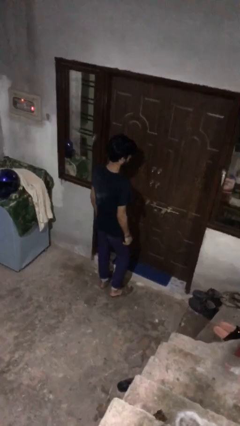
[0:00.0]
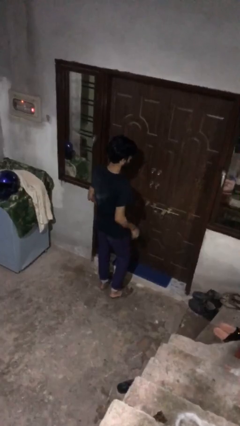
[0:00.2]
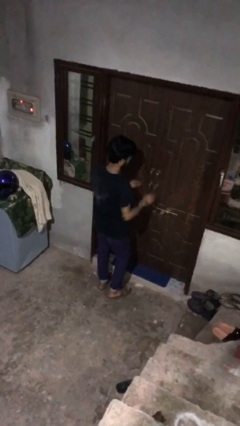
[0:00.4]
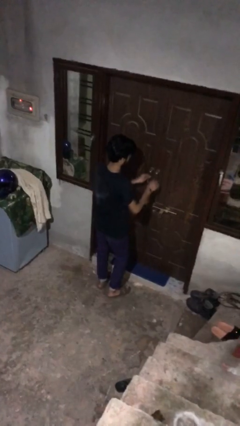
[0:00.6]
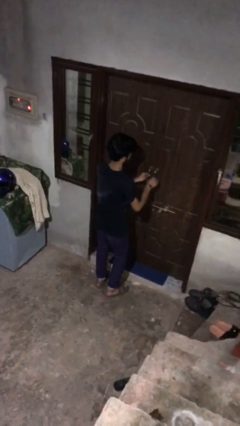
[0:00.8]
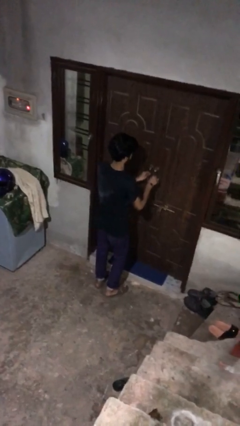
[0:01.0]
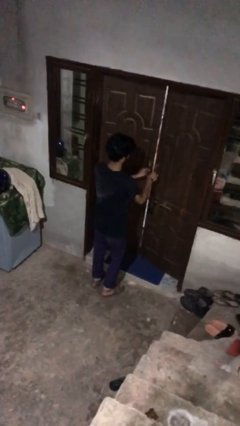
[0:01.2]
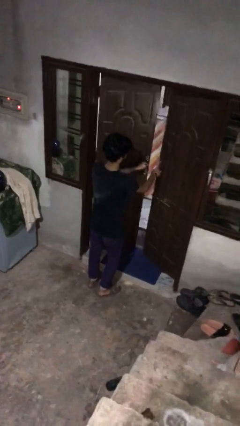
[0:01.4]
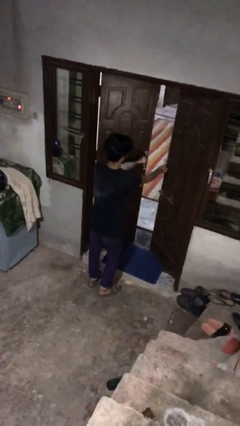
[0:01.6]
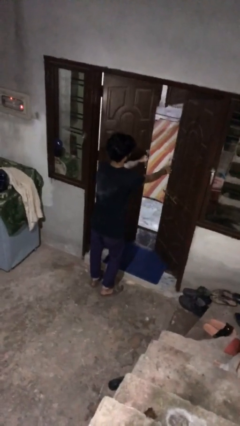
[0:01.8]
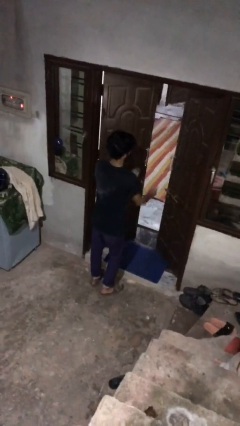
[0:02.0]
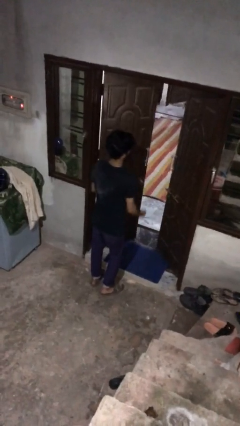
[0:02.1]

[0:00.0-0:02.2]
person opens facility door

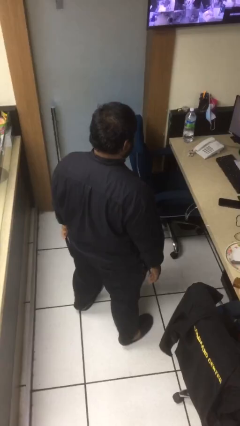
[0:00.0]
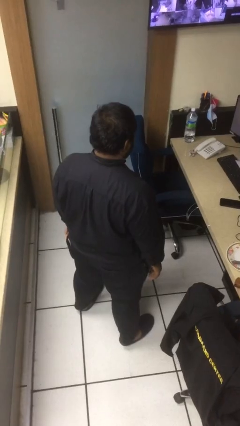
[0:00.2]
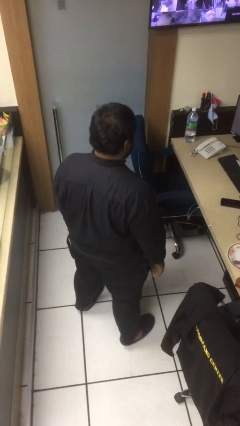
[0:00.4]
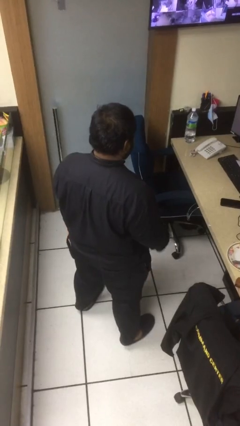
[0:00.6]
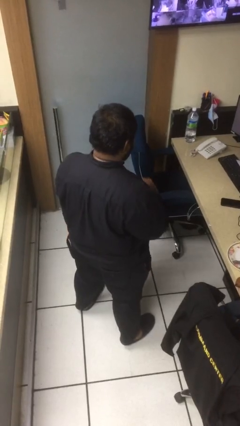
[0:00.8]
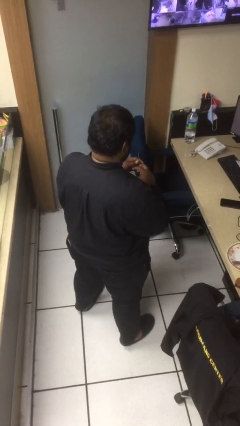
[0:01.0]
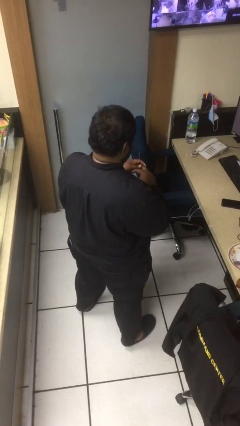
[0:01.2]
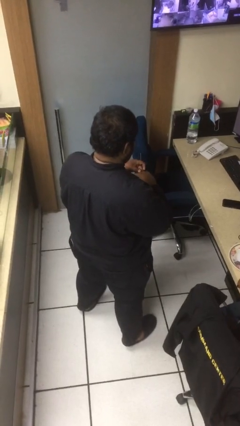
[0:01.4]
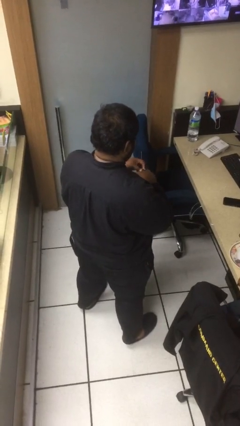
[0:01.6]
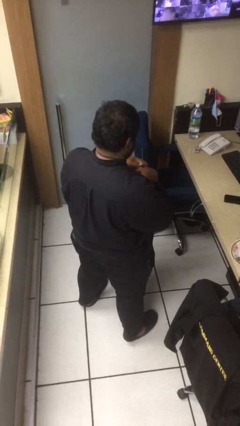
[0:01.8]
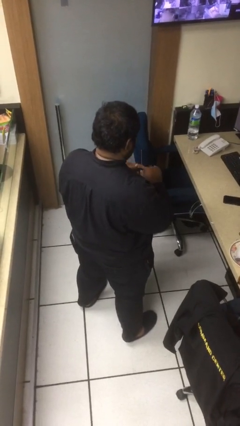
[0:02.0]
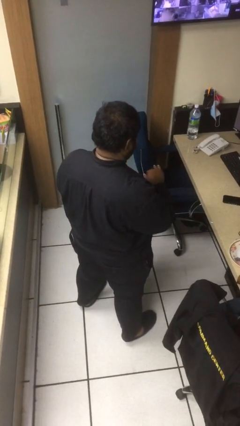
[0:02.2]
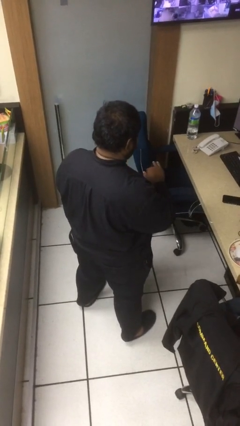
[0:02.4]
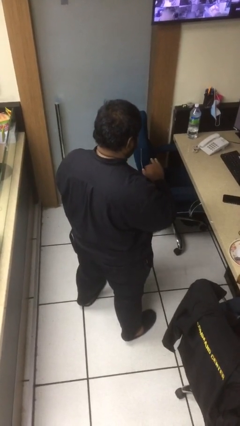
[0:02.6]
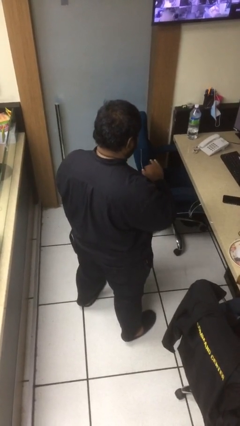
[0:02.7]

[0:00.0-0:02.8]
person puts on ring

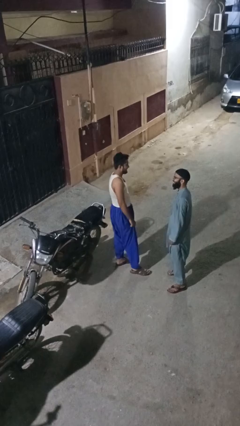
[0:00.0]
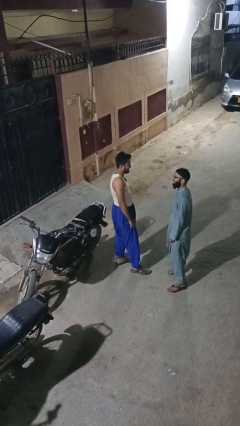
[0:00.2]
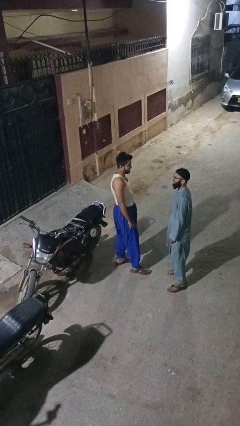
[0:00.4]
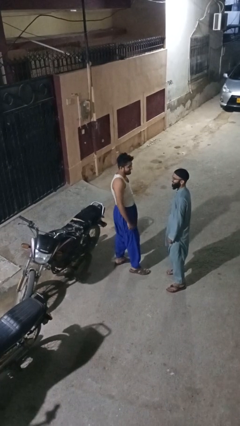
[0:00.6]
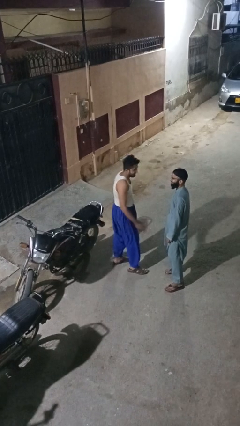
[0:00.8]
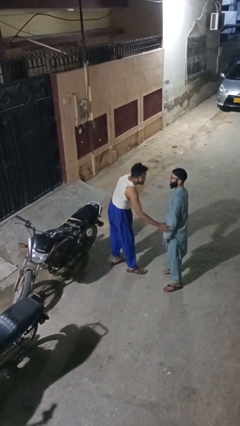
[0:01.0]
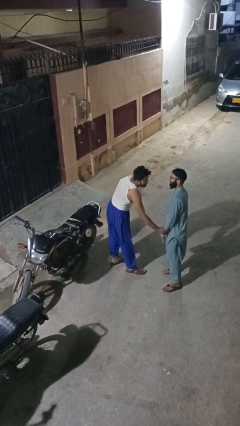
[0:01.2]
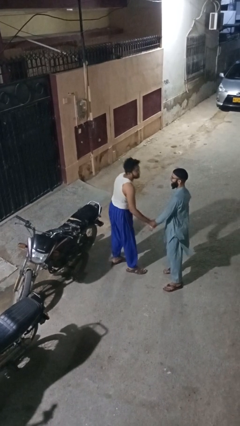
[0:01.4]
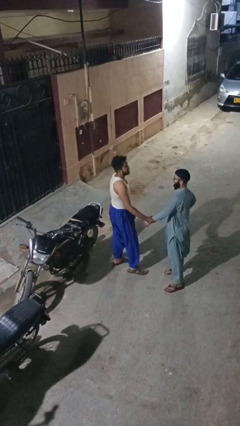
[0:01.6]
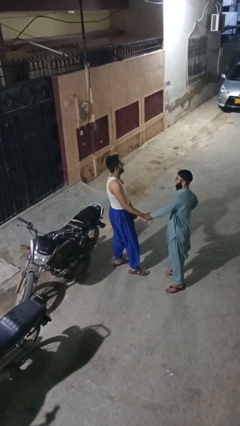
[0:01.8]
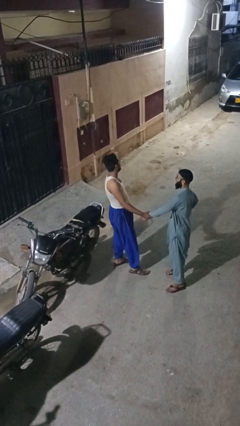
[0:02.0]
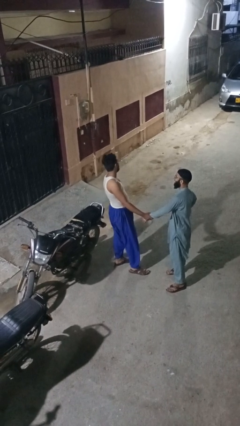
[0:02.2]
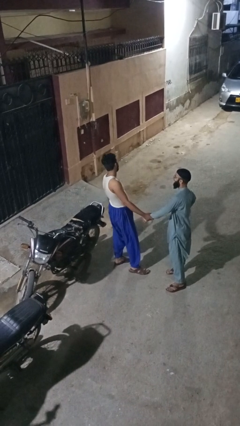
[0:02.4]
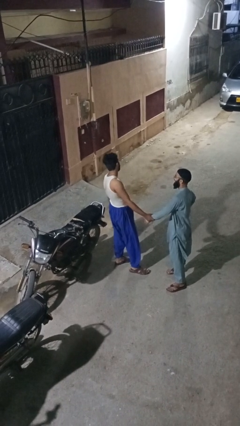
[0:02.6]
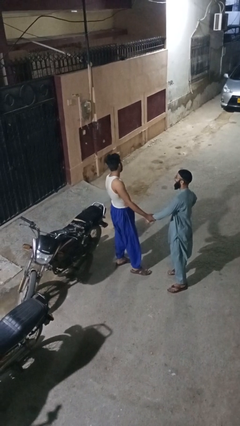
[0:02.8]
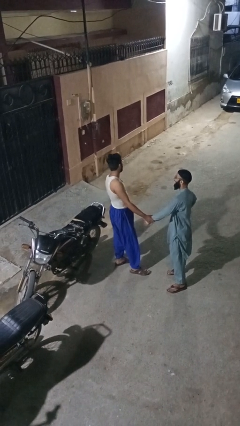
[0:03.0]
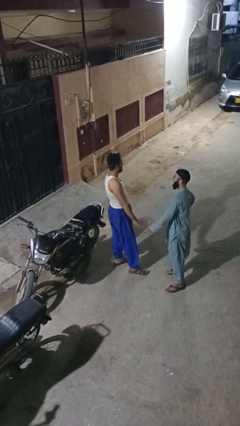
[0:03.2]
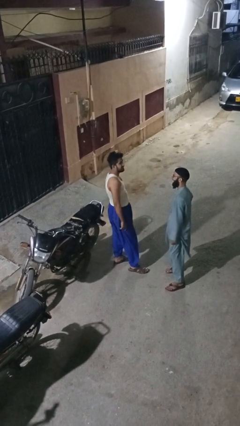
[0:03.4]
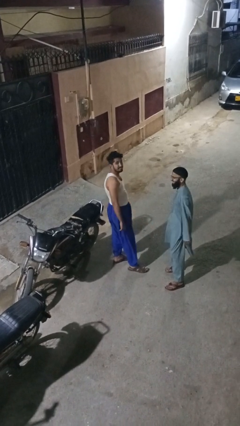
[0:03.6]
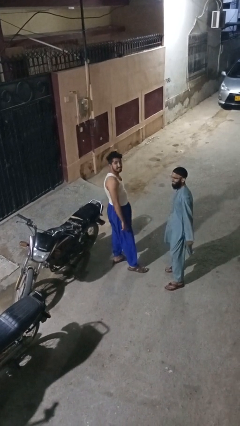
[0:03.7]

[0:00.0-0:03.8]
person grabs person by forearm

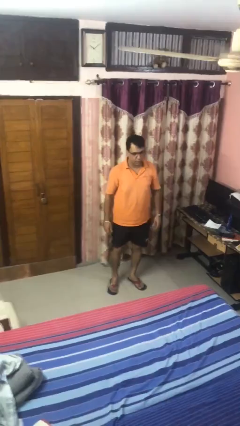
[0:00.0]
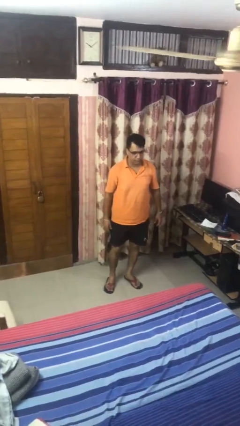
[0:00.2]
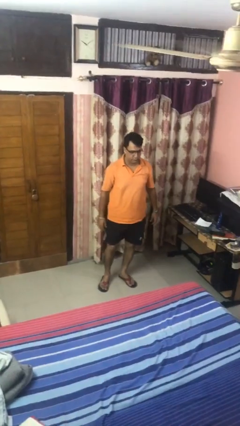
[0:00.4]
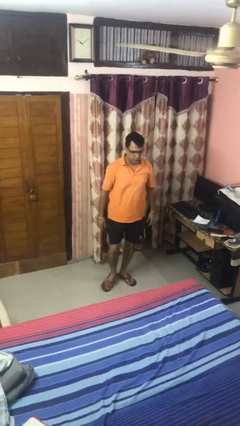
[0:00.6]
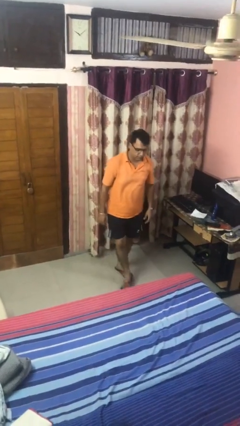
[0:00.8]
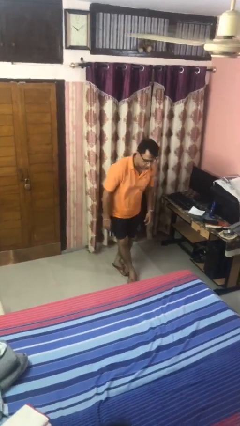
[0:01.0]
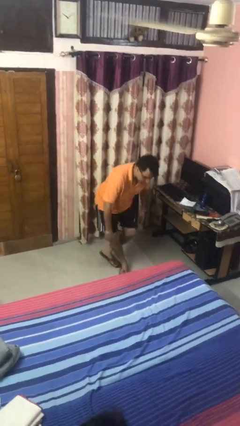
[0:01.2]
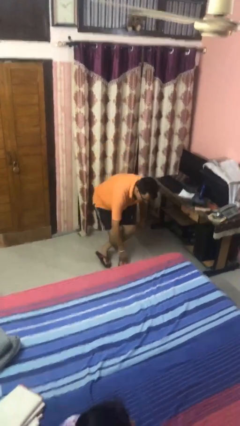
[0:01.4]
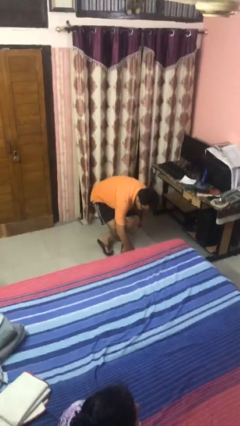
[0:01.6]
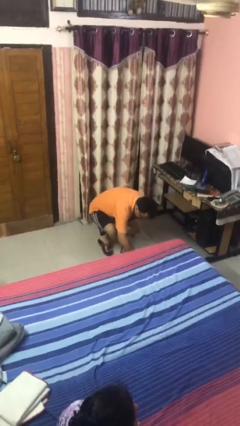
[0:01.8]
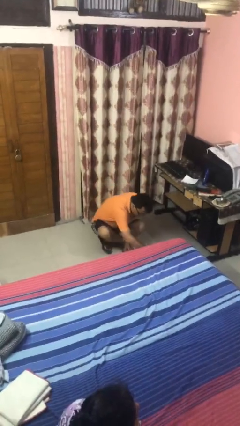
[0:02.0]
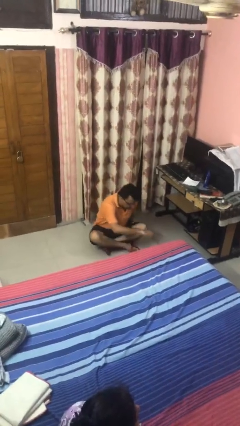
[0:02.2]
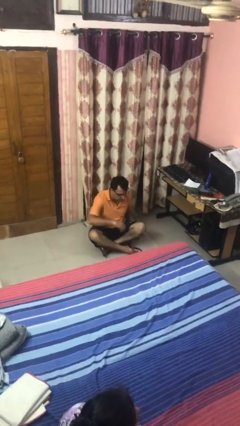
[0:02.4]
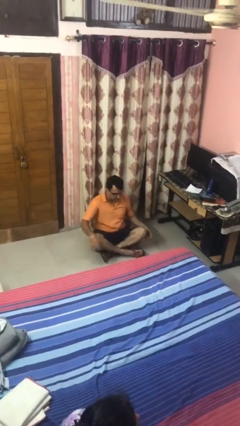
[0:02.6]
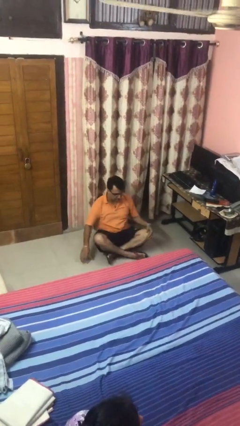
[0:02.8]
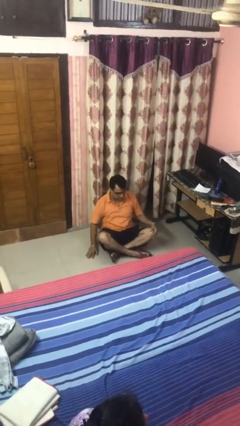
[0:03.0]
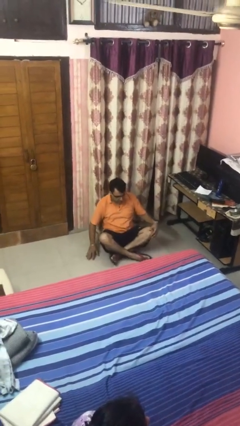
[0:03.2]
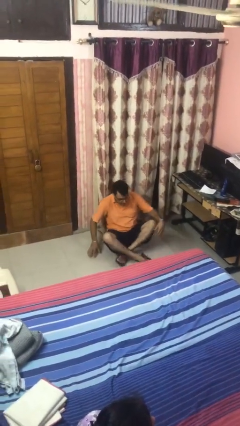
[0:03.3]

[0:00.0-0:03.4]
person sits crisscross

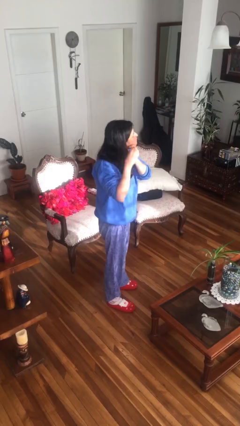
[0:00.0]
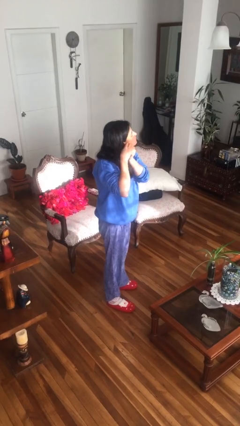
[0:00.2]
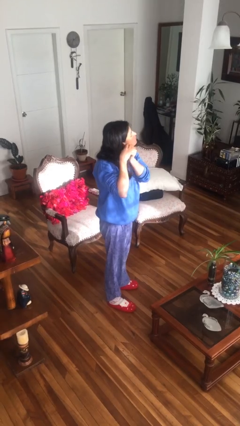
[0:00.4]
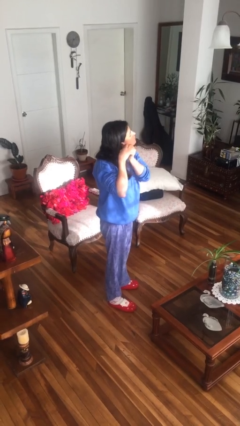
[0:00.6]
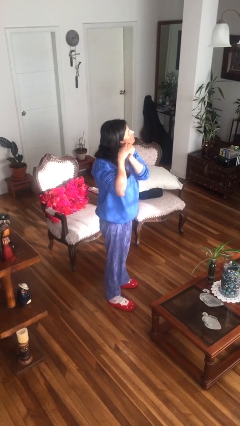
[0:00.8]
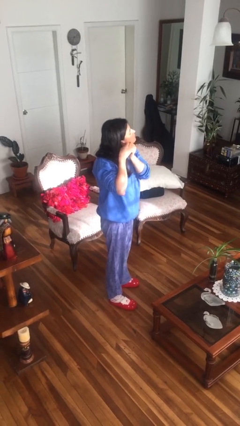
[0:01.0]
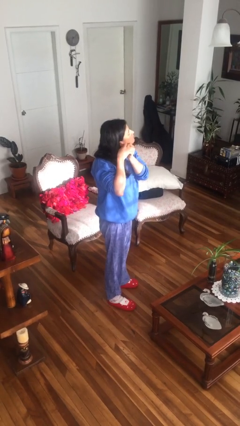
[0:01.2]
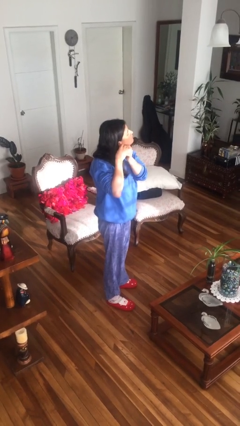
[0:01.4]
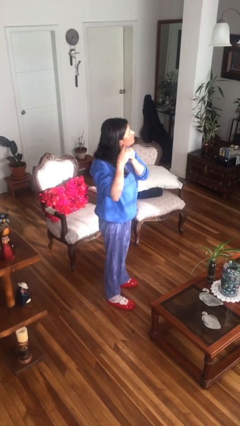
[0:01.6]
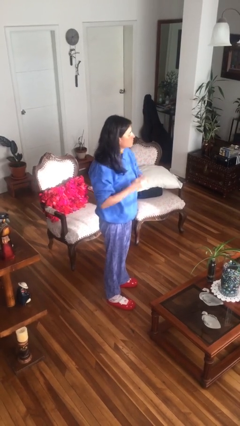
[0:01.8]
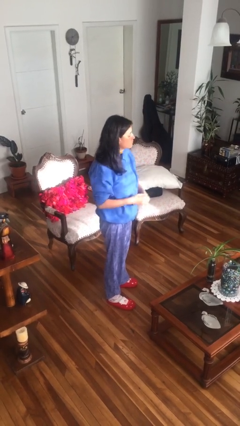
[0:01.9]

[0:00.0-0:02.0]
person puts on earrings

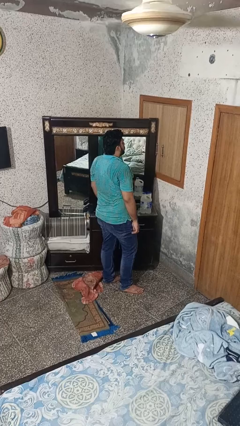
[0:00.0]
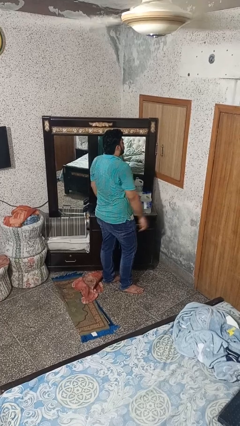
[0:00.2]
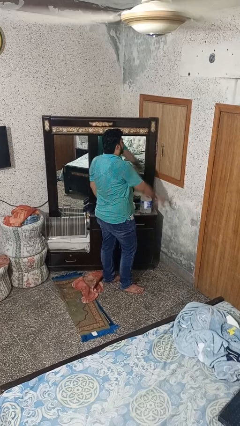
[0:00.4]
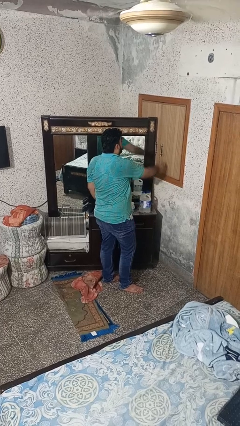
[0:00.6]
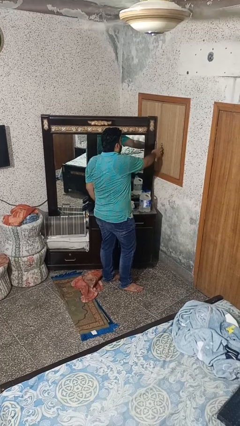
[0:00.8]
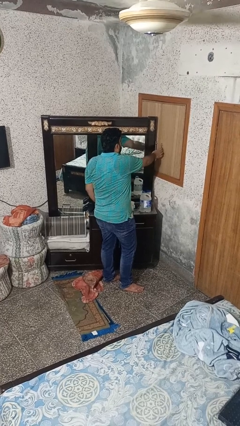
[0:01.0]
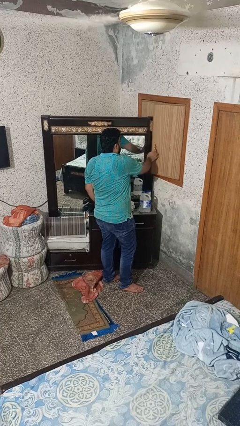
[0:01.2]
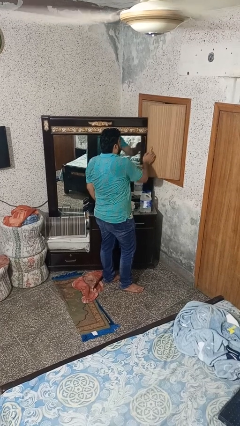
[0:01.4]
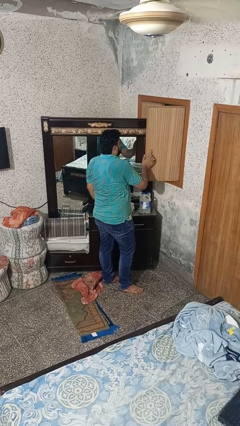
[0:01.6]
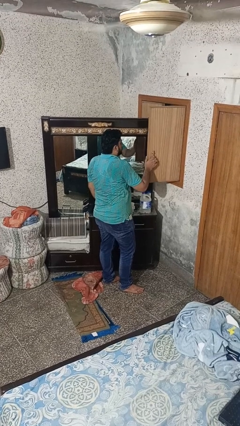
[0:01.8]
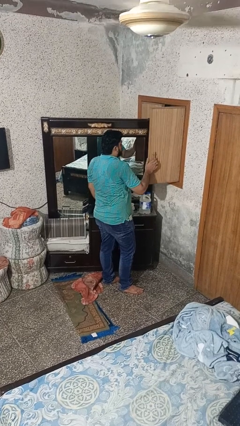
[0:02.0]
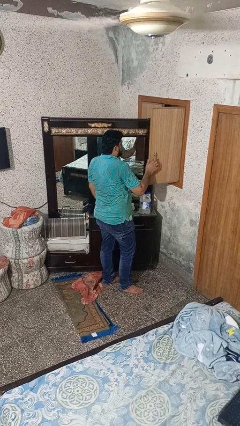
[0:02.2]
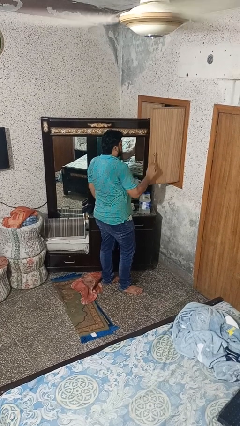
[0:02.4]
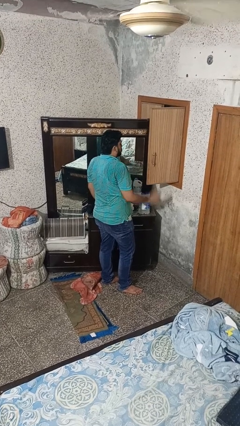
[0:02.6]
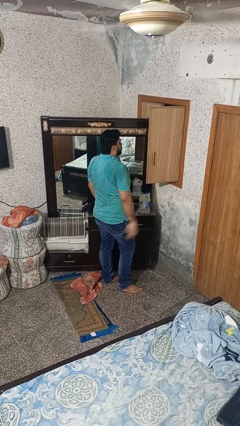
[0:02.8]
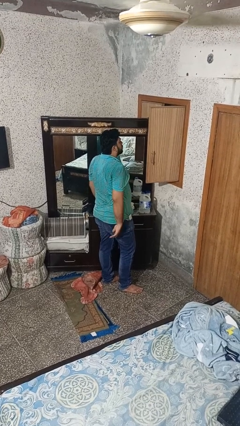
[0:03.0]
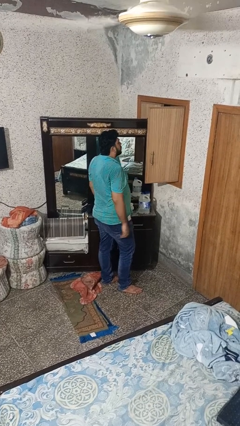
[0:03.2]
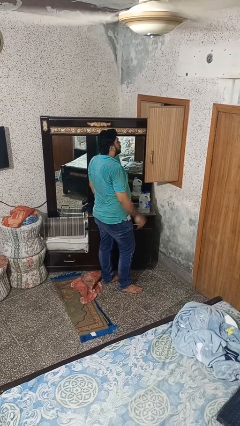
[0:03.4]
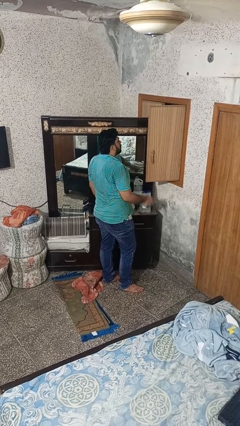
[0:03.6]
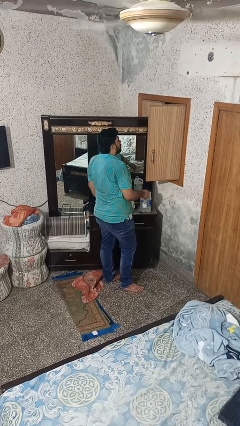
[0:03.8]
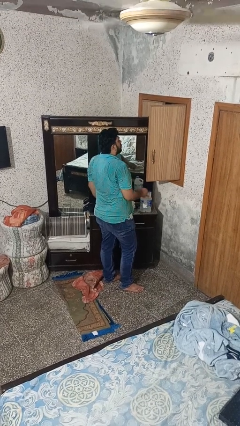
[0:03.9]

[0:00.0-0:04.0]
person opens home window
